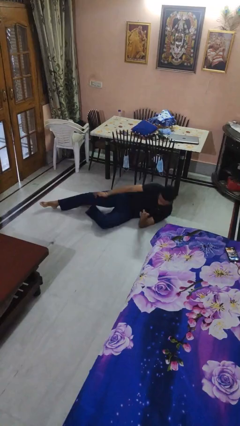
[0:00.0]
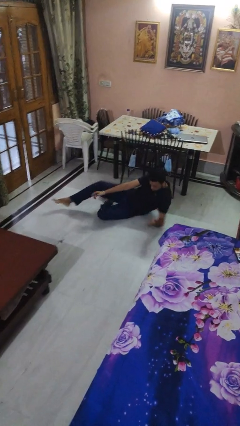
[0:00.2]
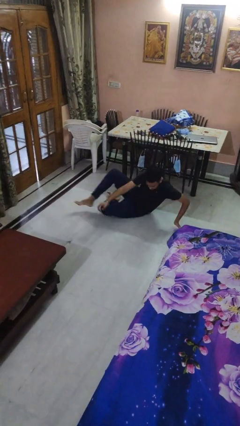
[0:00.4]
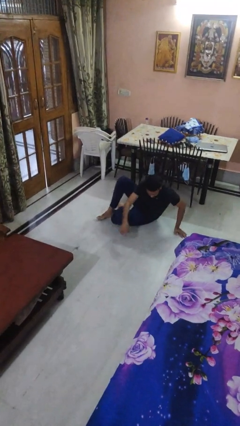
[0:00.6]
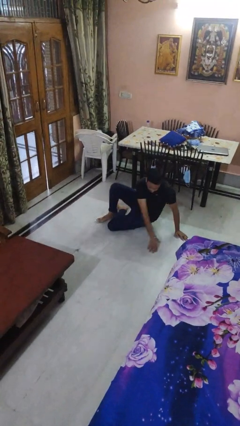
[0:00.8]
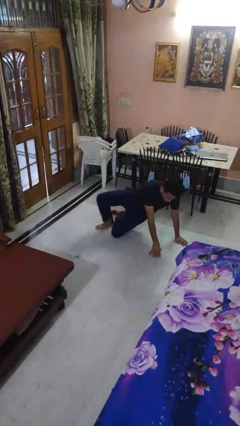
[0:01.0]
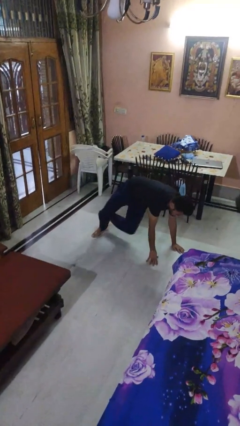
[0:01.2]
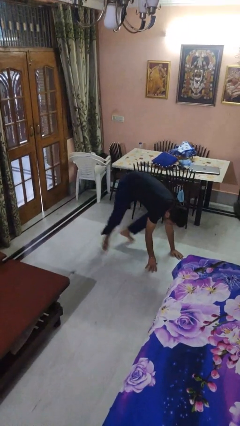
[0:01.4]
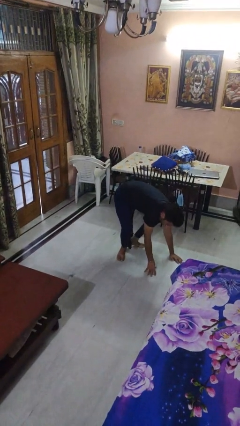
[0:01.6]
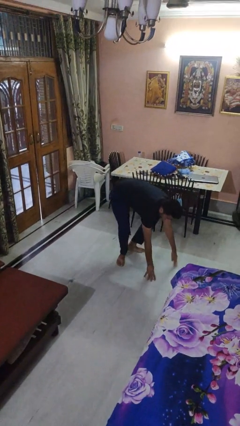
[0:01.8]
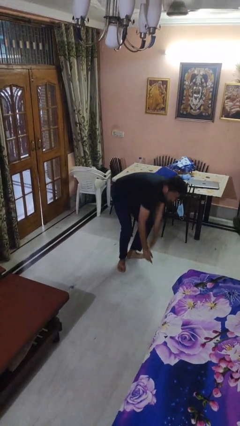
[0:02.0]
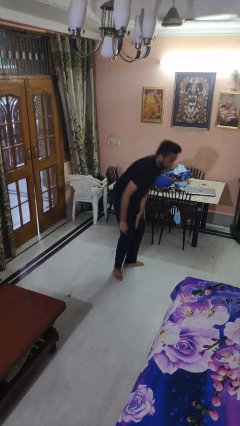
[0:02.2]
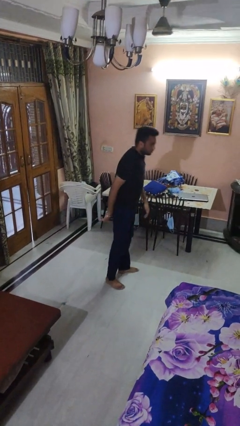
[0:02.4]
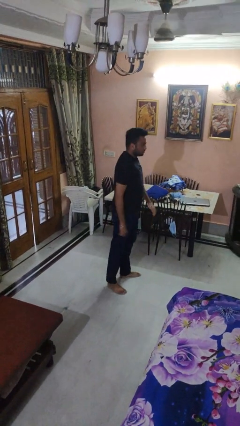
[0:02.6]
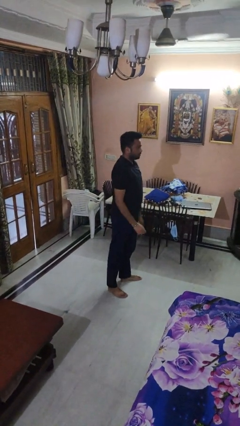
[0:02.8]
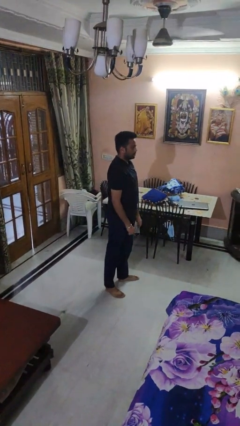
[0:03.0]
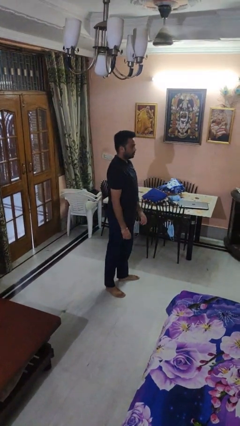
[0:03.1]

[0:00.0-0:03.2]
person stands up from floor

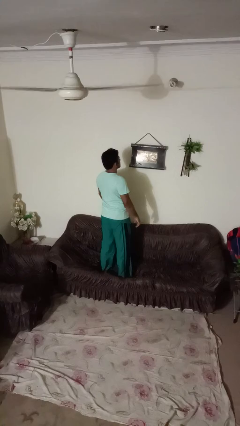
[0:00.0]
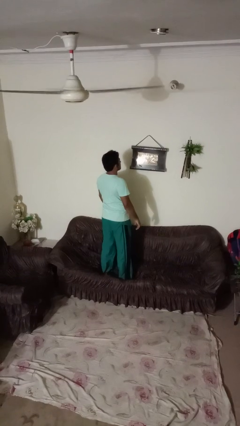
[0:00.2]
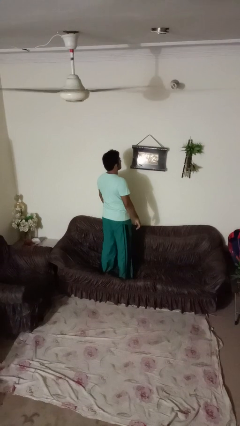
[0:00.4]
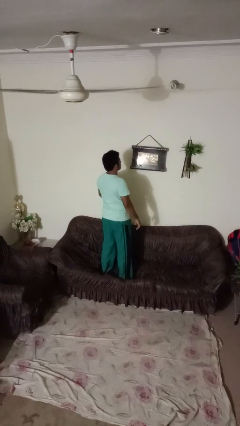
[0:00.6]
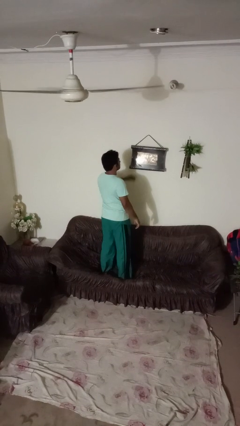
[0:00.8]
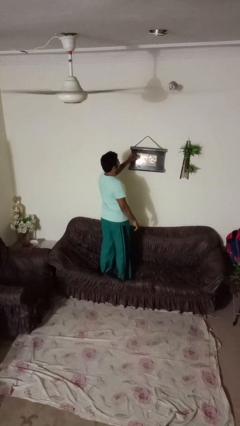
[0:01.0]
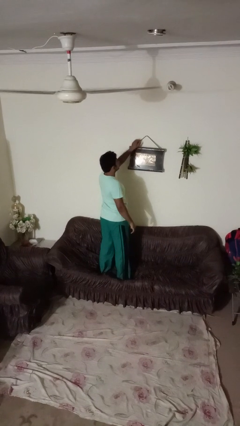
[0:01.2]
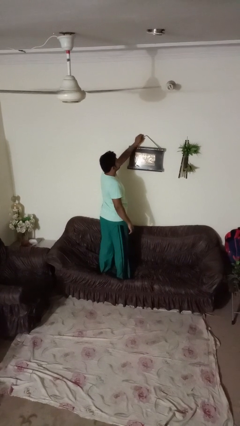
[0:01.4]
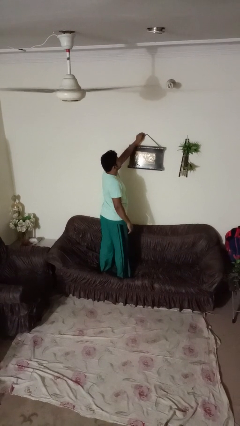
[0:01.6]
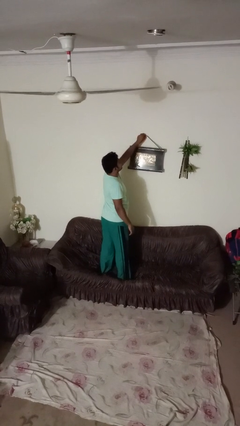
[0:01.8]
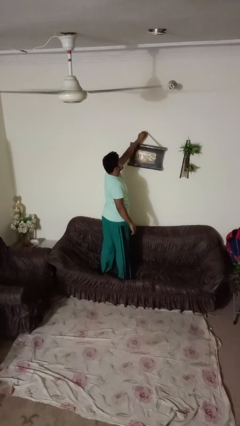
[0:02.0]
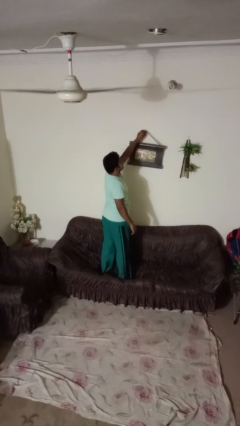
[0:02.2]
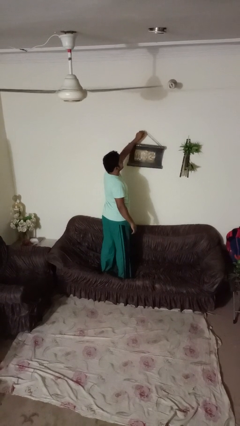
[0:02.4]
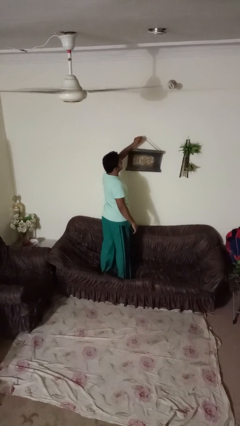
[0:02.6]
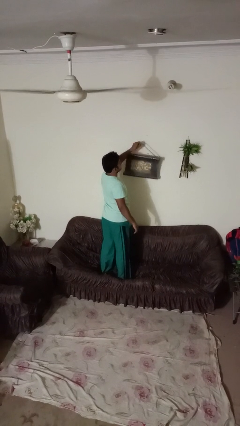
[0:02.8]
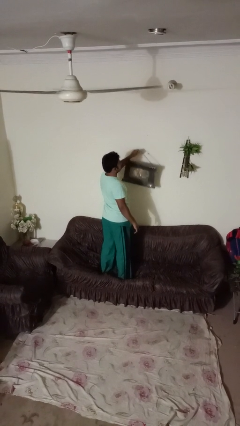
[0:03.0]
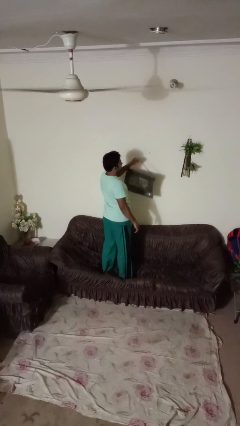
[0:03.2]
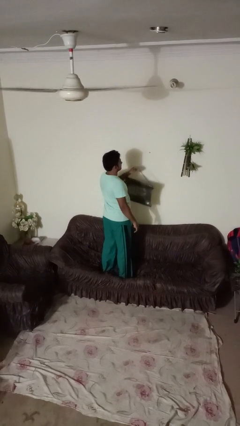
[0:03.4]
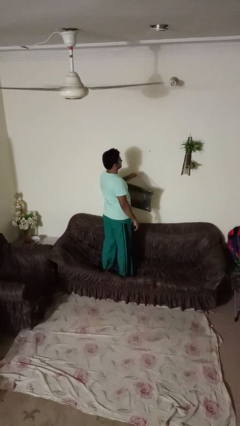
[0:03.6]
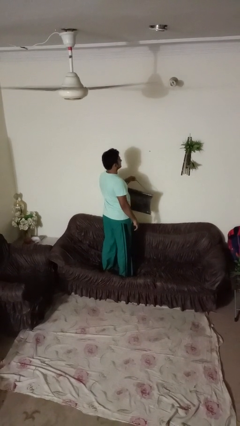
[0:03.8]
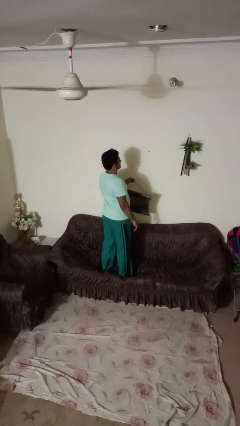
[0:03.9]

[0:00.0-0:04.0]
person takes down picture frame

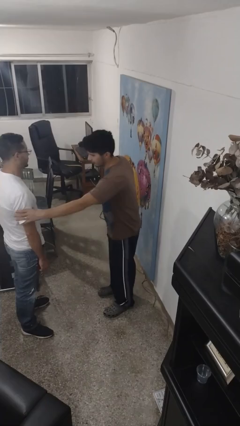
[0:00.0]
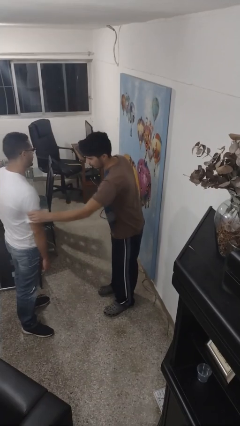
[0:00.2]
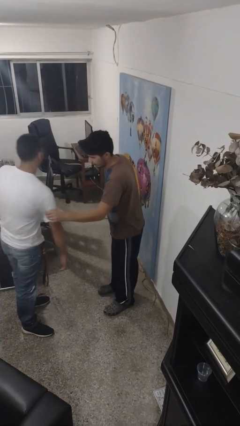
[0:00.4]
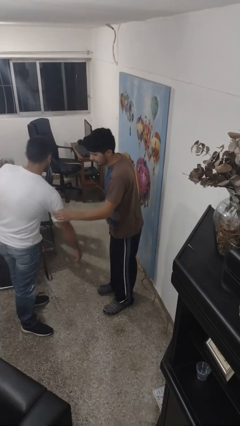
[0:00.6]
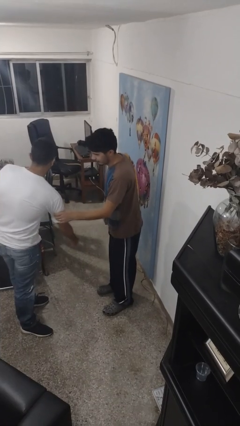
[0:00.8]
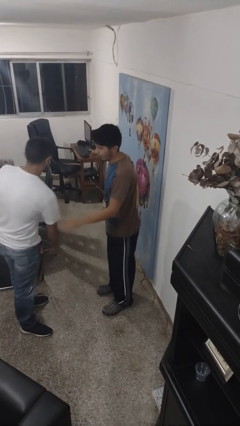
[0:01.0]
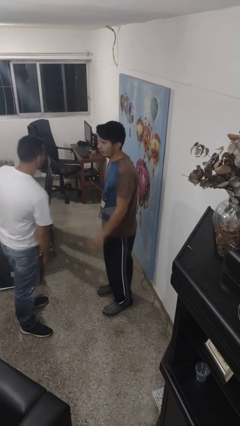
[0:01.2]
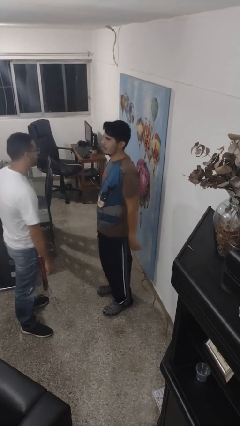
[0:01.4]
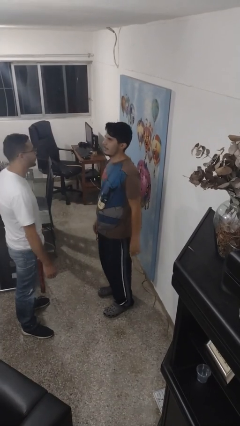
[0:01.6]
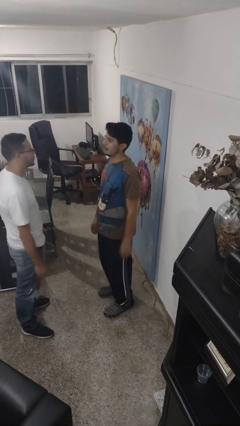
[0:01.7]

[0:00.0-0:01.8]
person grabs person by bicep

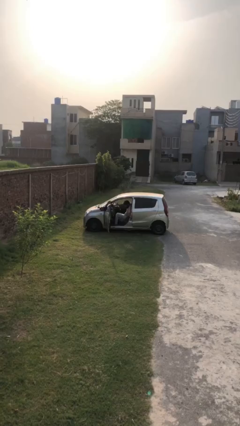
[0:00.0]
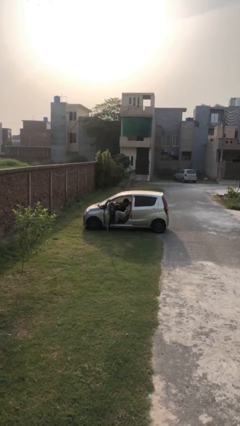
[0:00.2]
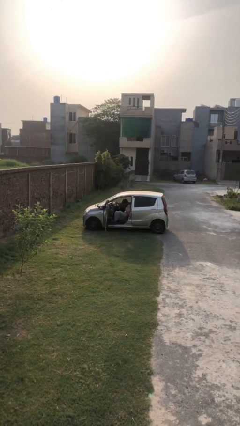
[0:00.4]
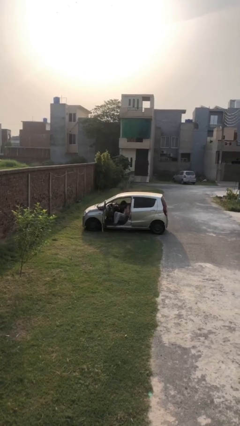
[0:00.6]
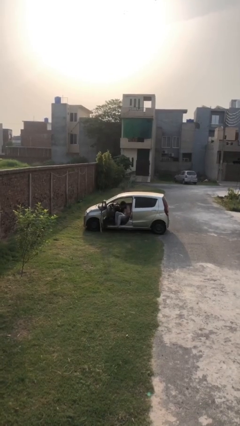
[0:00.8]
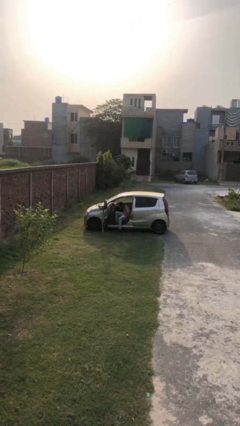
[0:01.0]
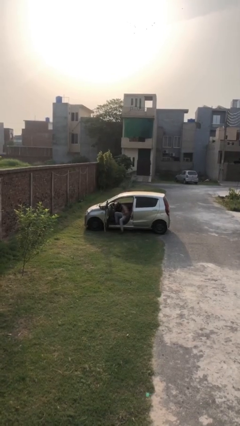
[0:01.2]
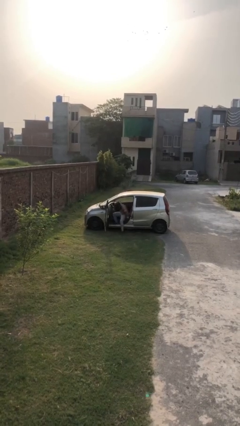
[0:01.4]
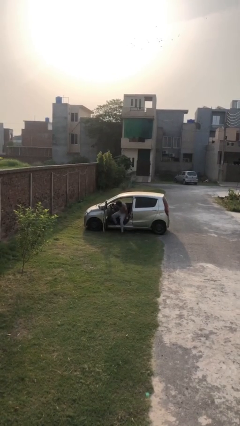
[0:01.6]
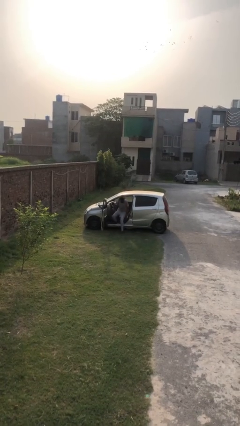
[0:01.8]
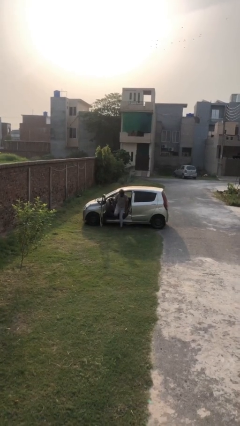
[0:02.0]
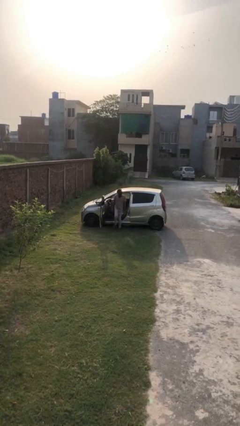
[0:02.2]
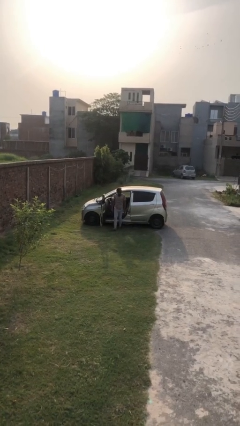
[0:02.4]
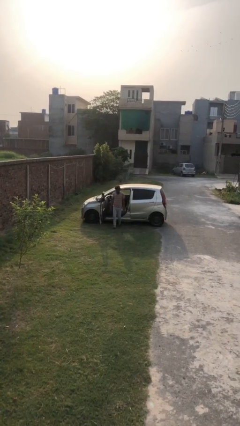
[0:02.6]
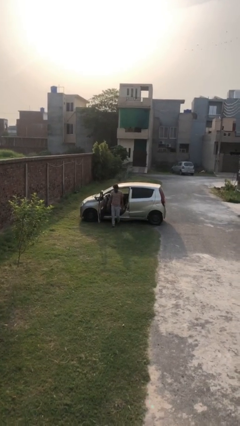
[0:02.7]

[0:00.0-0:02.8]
person exits car

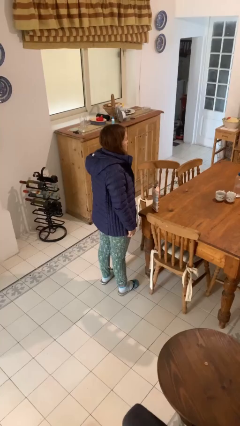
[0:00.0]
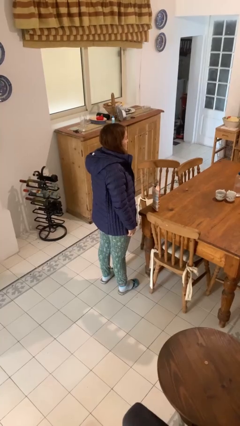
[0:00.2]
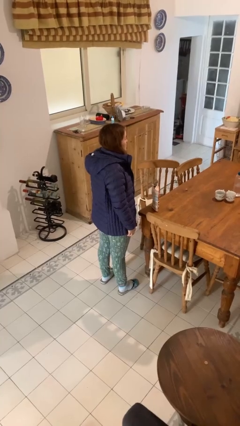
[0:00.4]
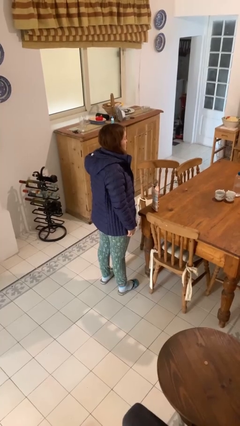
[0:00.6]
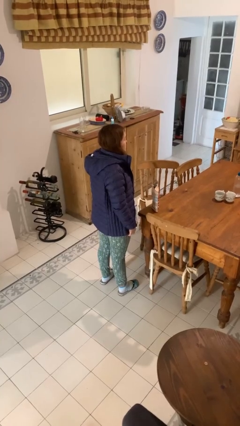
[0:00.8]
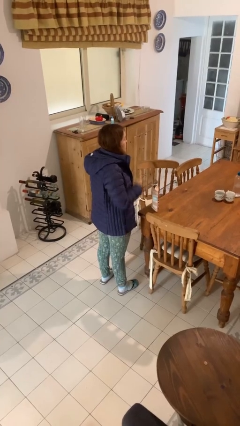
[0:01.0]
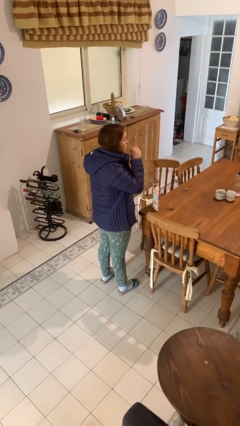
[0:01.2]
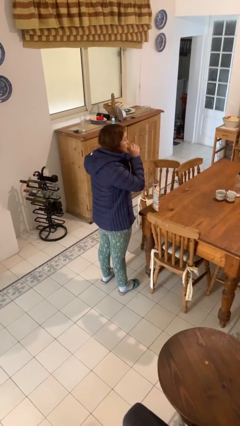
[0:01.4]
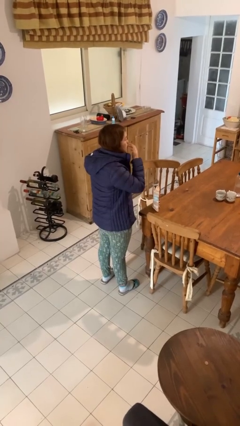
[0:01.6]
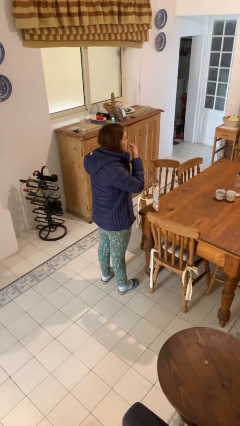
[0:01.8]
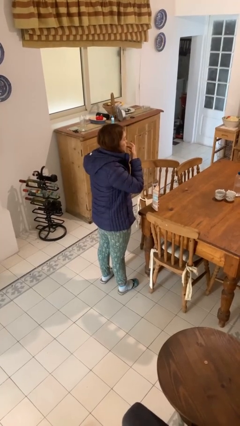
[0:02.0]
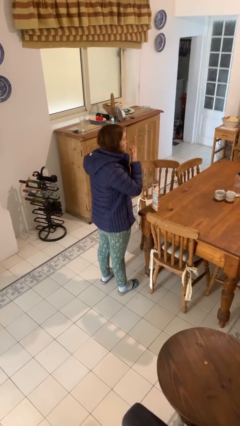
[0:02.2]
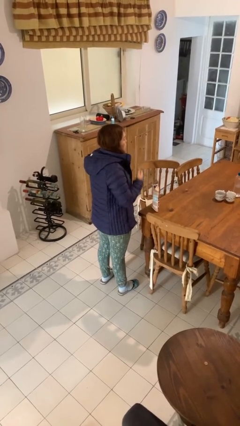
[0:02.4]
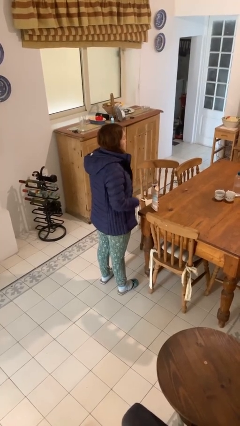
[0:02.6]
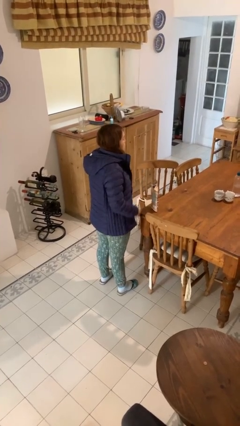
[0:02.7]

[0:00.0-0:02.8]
person licks fingers

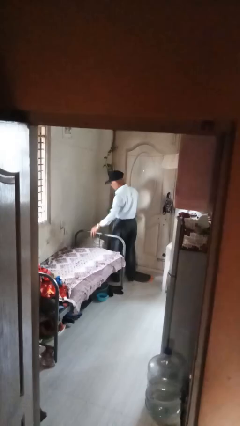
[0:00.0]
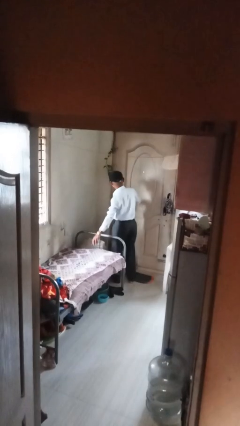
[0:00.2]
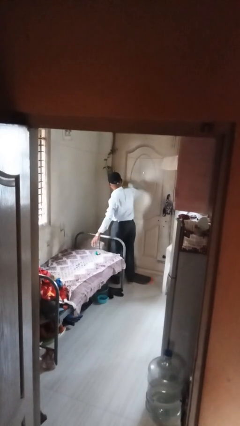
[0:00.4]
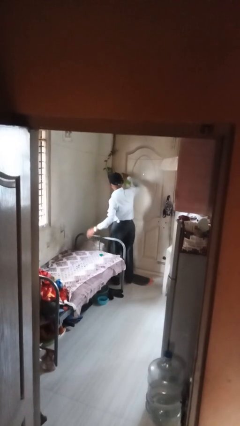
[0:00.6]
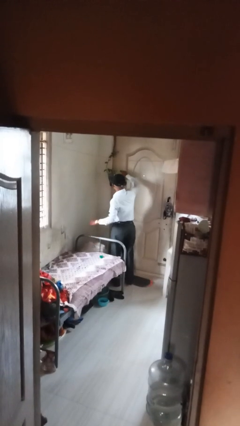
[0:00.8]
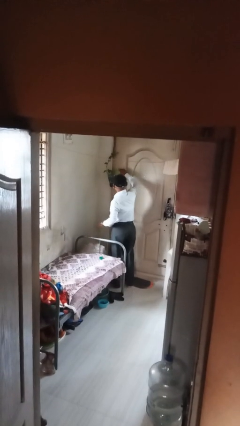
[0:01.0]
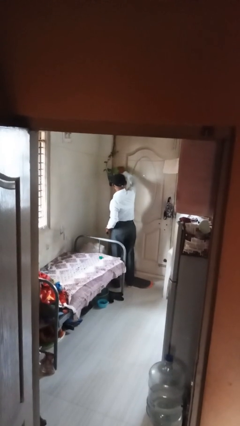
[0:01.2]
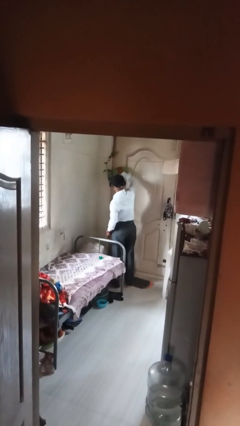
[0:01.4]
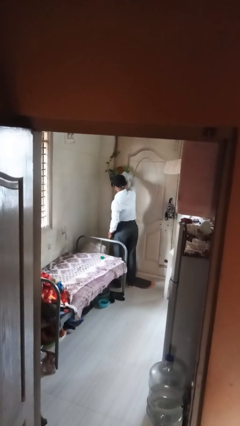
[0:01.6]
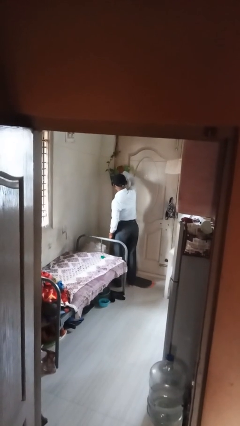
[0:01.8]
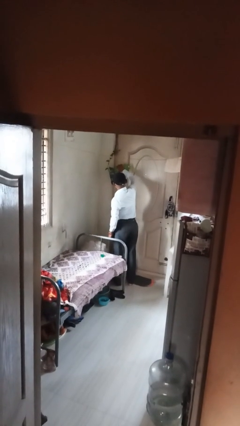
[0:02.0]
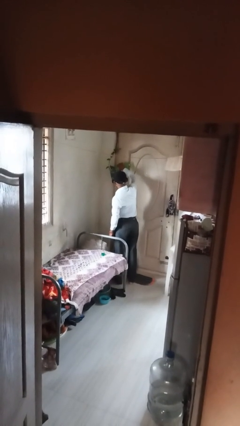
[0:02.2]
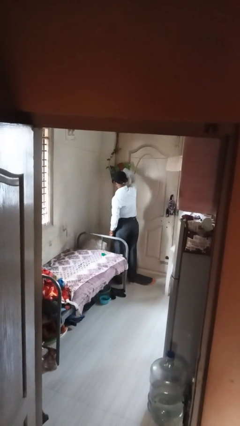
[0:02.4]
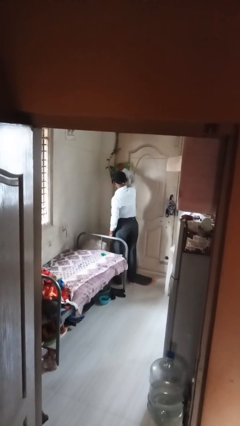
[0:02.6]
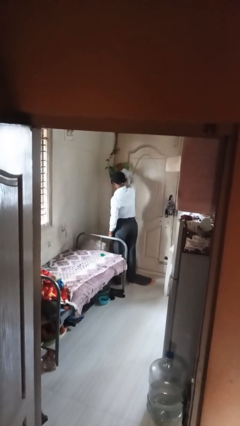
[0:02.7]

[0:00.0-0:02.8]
person waters houseplant
